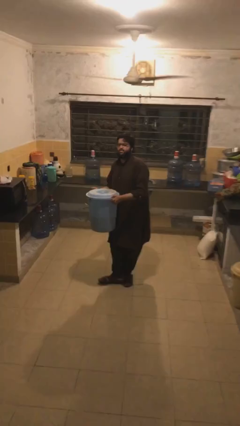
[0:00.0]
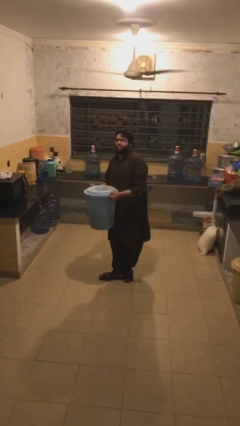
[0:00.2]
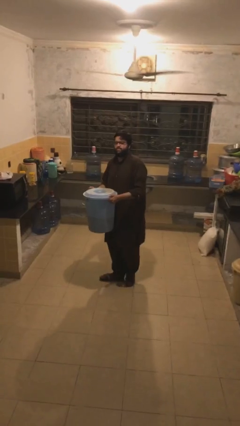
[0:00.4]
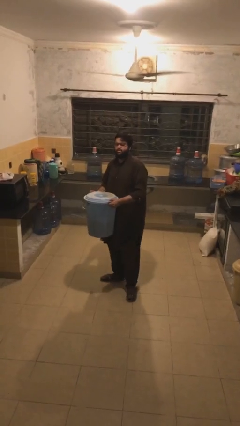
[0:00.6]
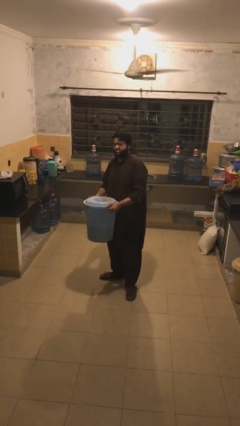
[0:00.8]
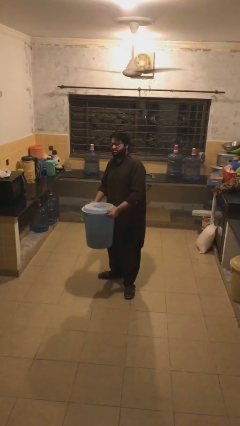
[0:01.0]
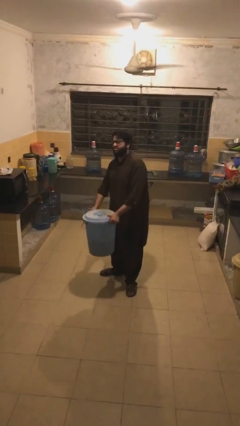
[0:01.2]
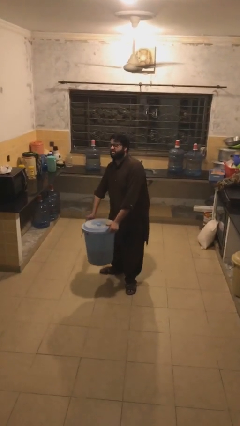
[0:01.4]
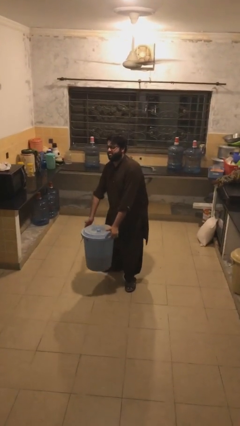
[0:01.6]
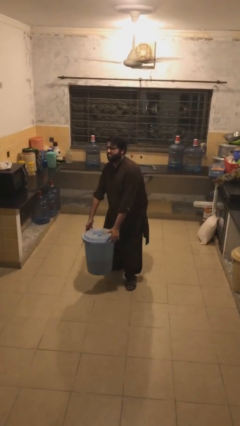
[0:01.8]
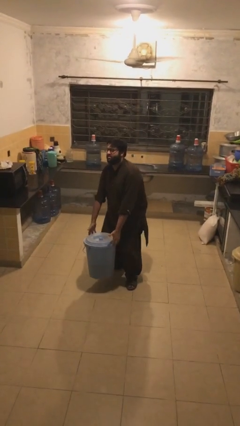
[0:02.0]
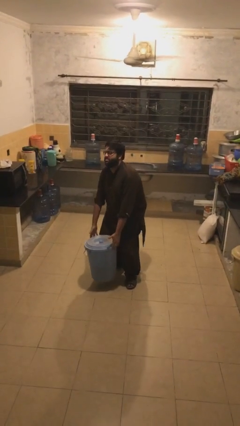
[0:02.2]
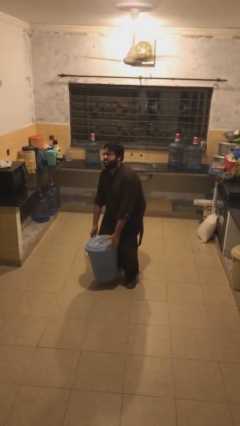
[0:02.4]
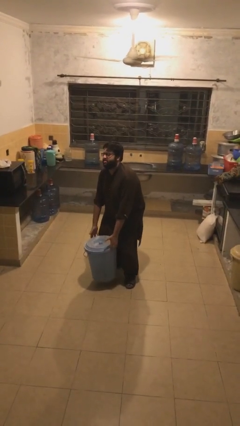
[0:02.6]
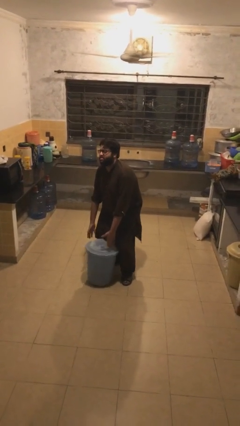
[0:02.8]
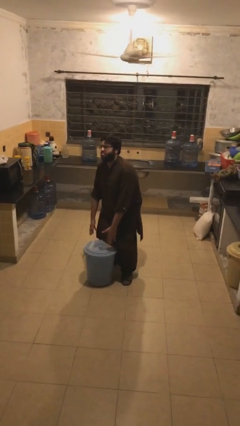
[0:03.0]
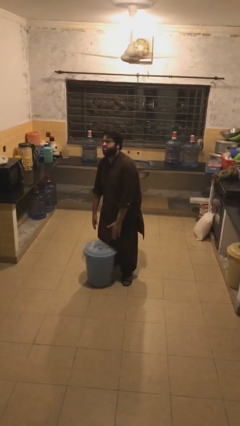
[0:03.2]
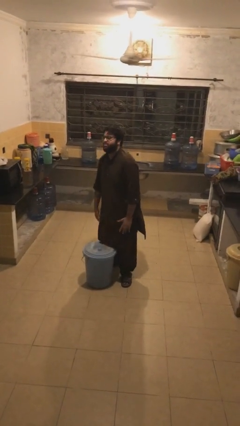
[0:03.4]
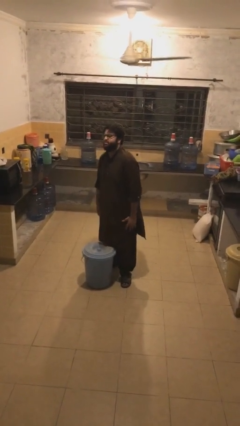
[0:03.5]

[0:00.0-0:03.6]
person puts down object on floor

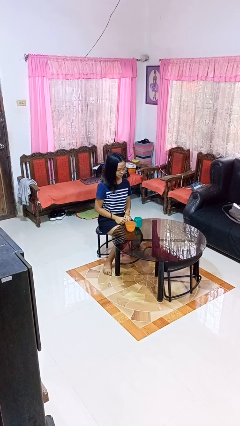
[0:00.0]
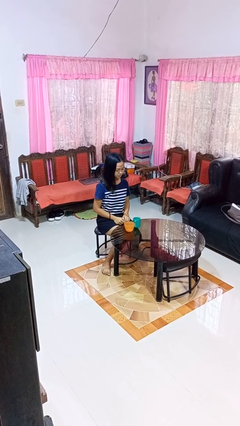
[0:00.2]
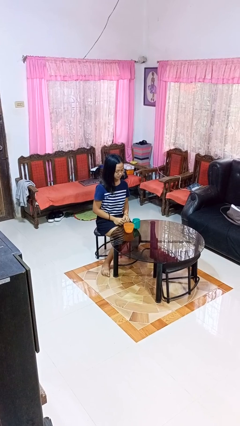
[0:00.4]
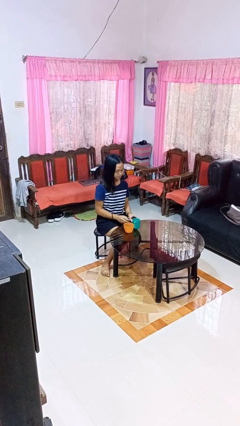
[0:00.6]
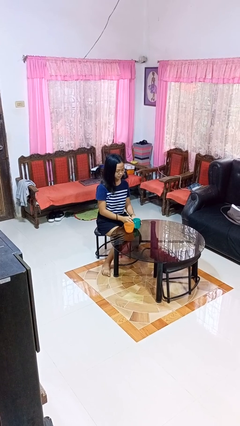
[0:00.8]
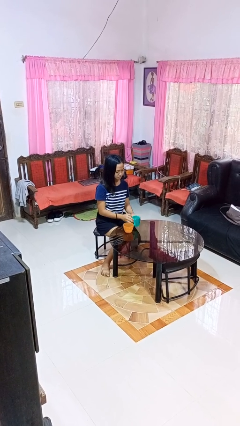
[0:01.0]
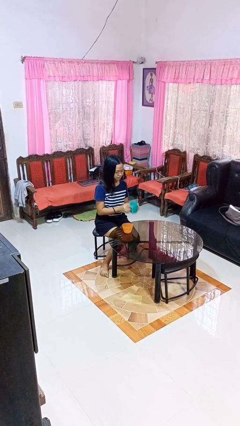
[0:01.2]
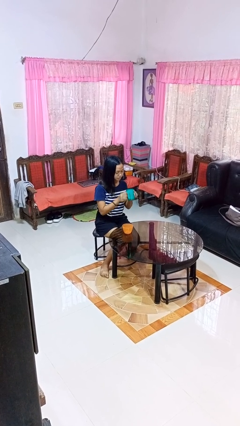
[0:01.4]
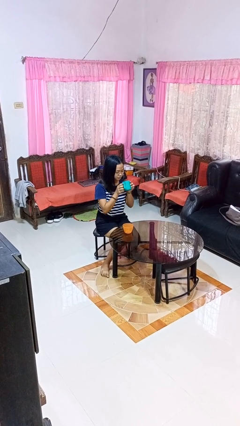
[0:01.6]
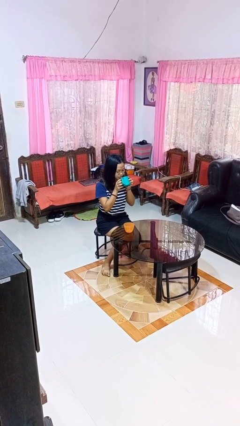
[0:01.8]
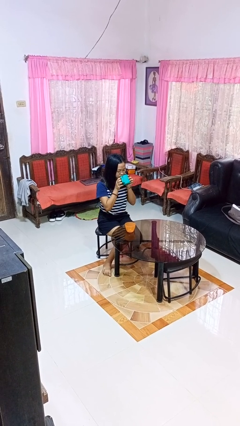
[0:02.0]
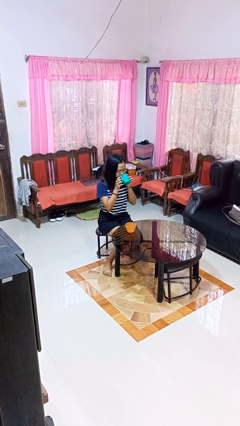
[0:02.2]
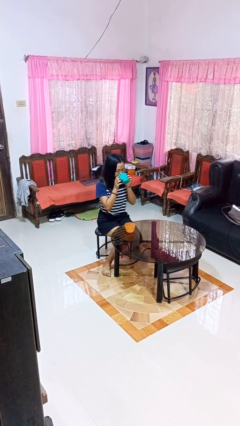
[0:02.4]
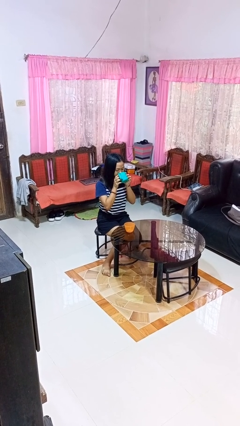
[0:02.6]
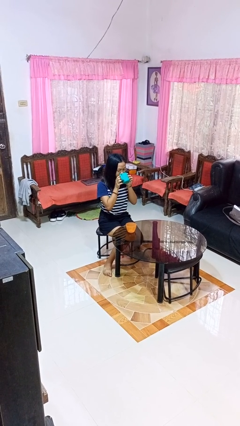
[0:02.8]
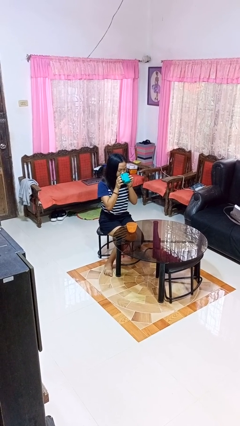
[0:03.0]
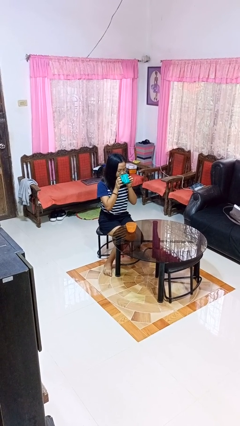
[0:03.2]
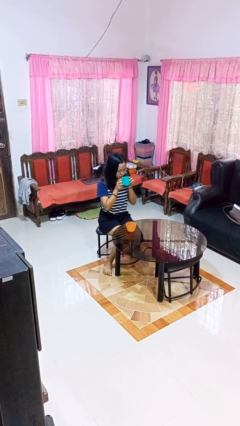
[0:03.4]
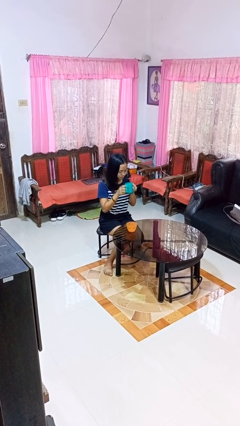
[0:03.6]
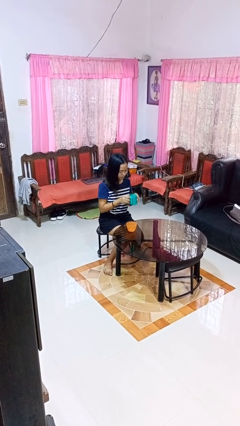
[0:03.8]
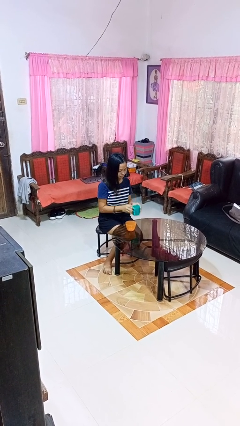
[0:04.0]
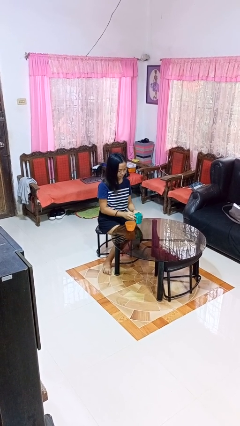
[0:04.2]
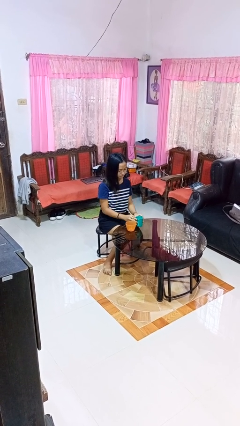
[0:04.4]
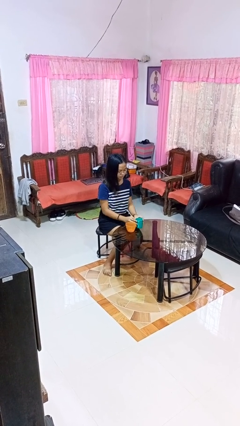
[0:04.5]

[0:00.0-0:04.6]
person drinks from cup

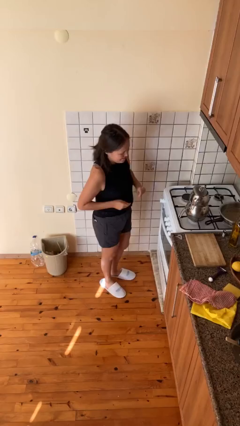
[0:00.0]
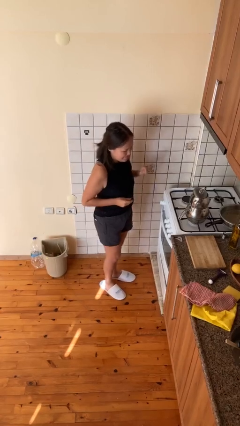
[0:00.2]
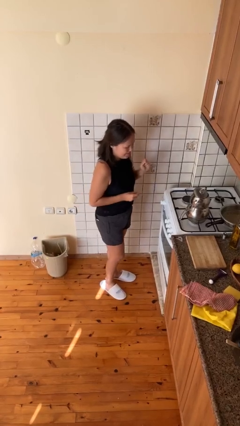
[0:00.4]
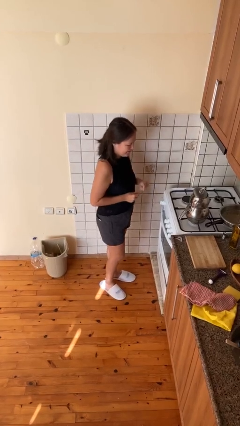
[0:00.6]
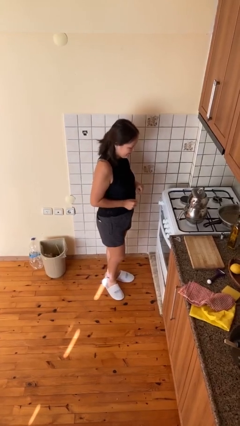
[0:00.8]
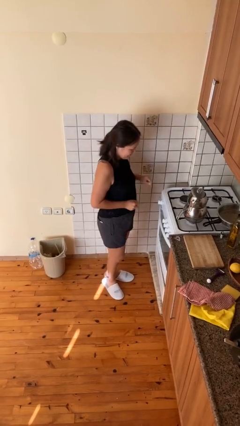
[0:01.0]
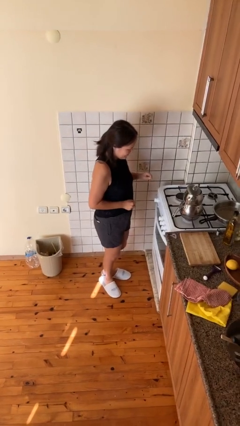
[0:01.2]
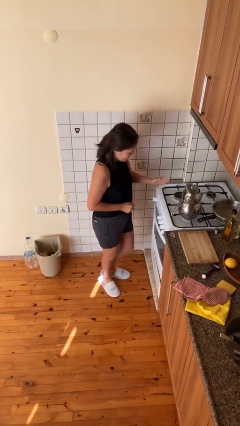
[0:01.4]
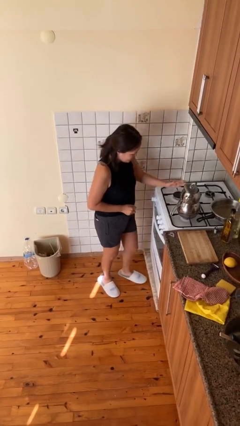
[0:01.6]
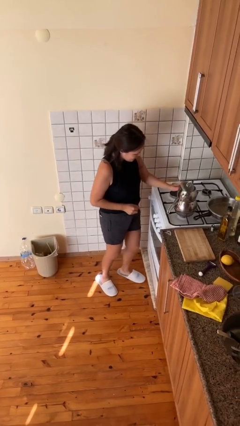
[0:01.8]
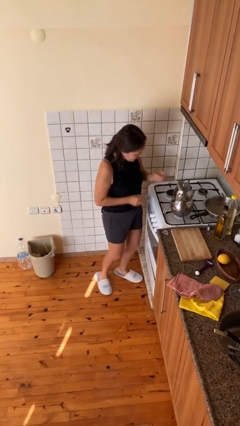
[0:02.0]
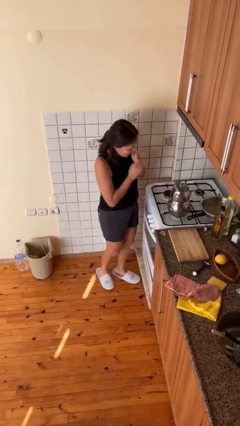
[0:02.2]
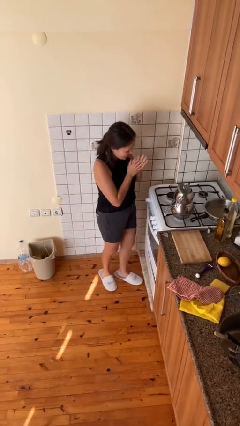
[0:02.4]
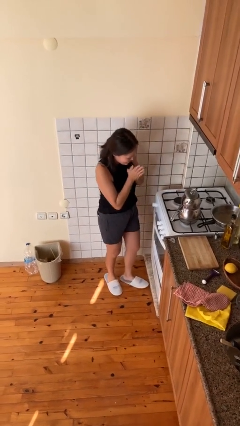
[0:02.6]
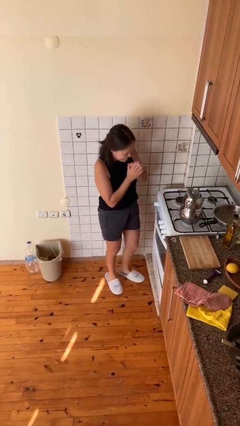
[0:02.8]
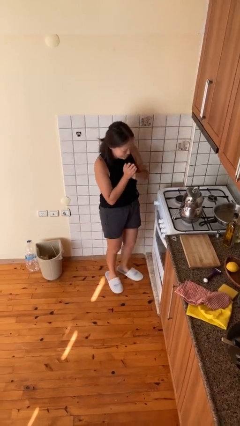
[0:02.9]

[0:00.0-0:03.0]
person burns hand

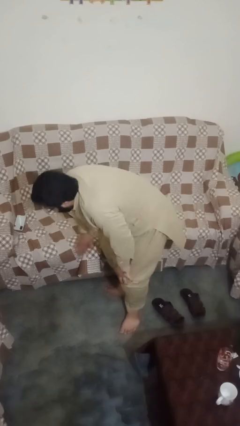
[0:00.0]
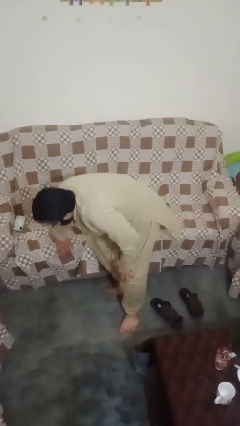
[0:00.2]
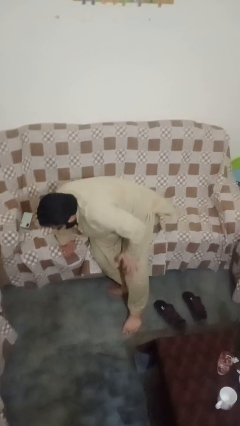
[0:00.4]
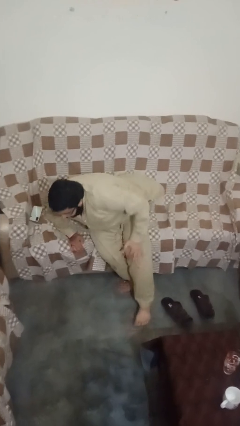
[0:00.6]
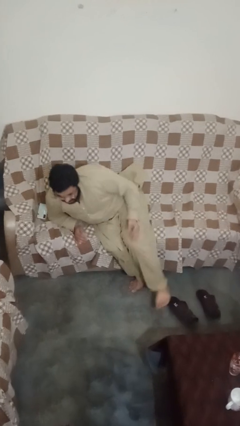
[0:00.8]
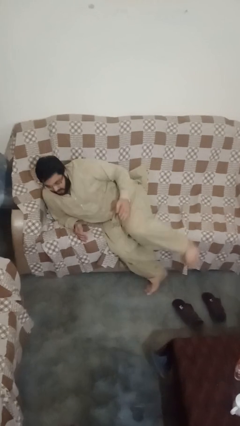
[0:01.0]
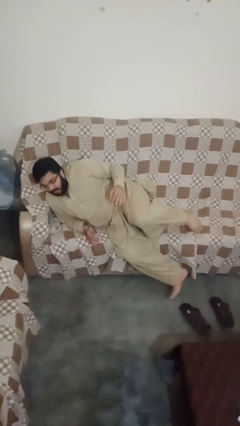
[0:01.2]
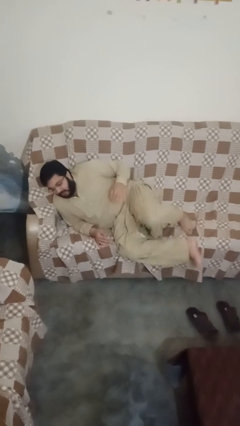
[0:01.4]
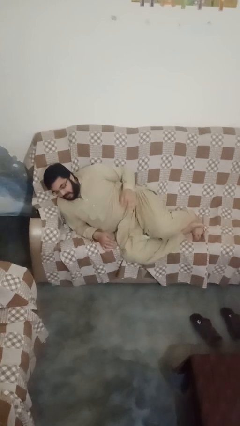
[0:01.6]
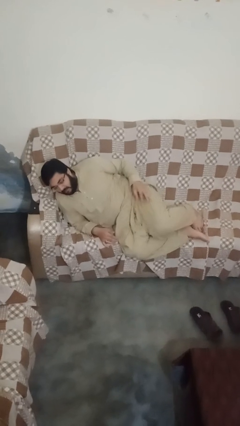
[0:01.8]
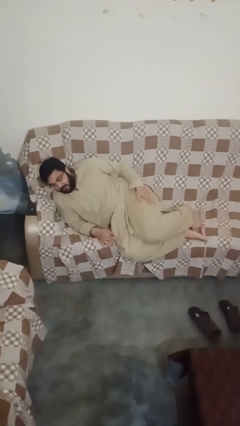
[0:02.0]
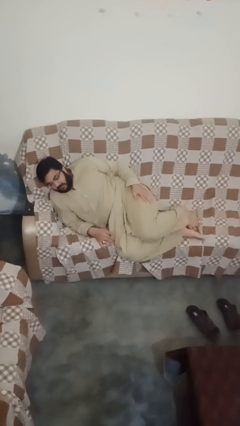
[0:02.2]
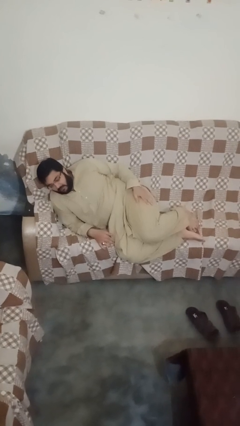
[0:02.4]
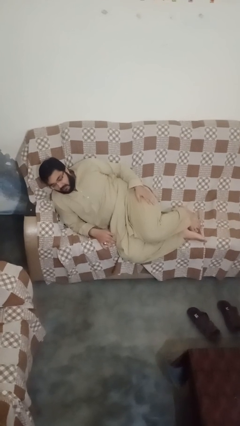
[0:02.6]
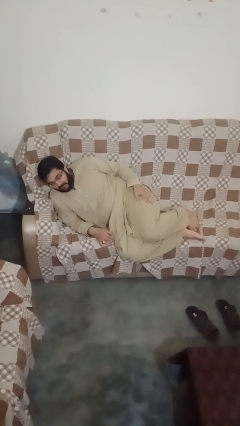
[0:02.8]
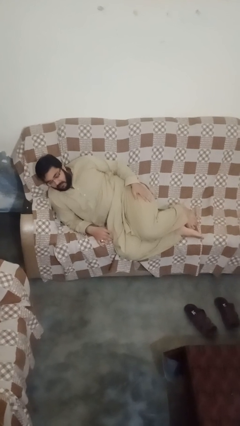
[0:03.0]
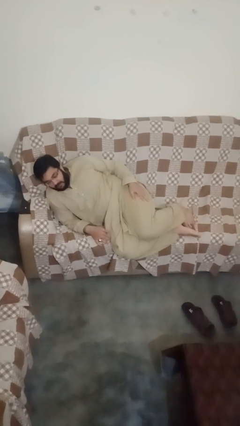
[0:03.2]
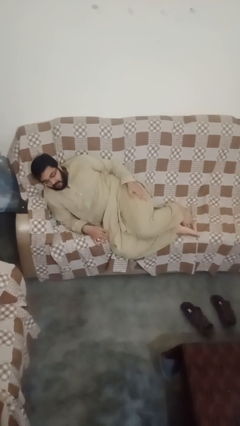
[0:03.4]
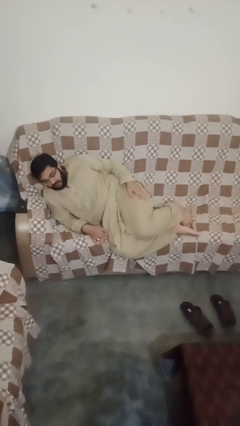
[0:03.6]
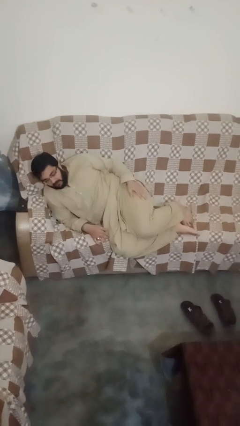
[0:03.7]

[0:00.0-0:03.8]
person lies down on bed

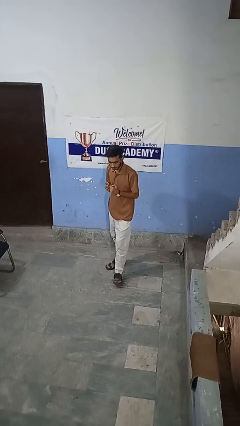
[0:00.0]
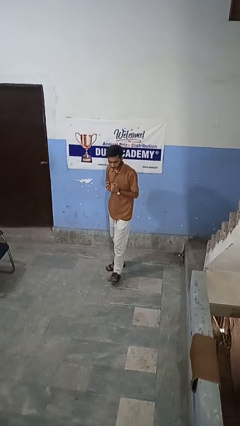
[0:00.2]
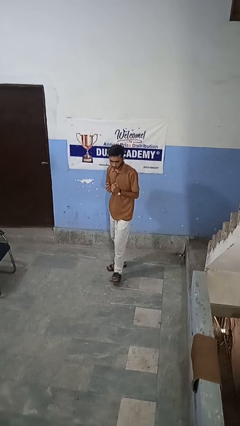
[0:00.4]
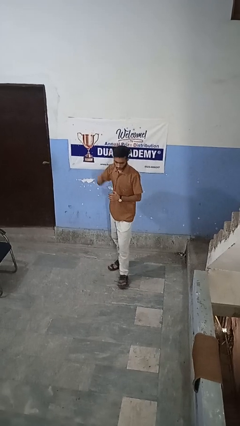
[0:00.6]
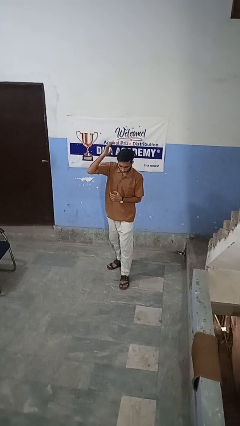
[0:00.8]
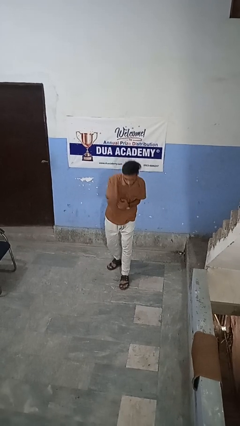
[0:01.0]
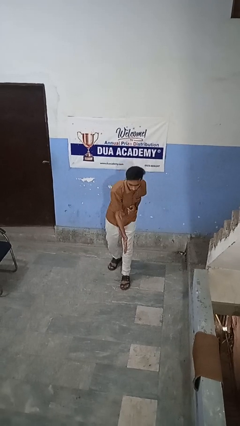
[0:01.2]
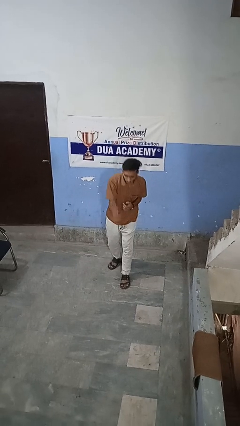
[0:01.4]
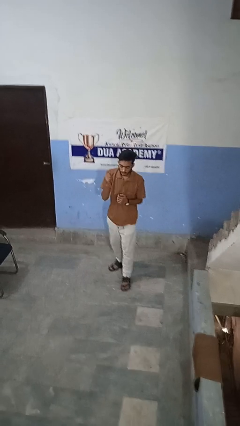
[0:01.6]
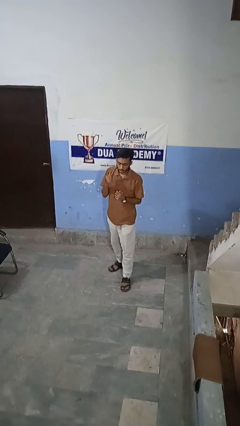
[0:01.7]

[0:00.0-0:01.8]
person karate chop

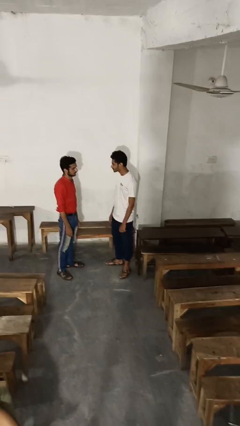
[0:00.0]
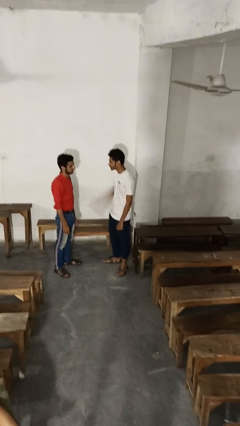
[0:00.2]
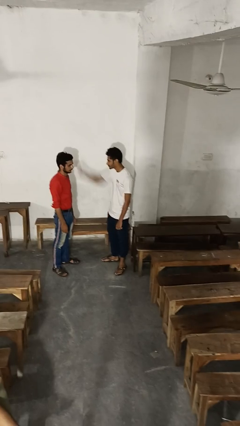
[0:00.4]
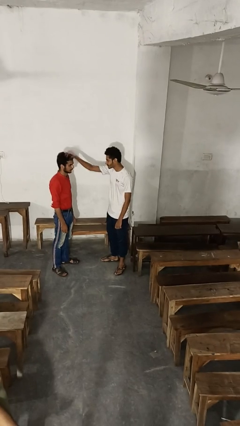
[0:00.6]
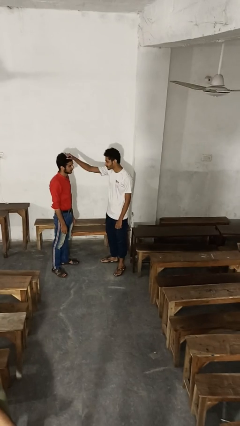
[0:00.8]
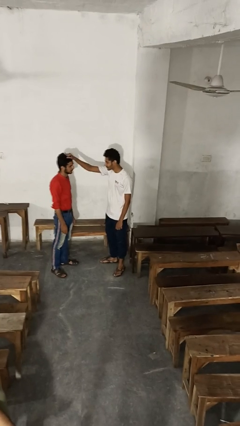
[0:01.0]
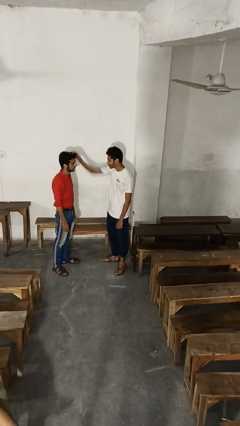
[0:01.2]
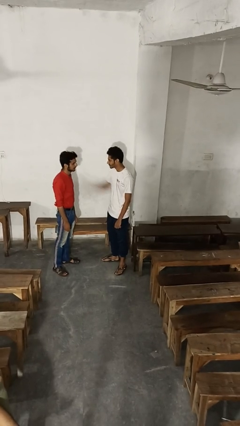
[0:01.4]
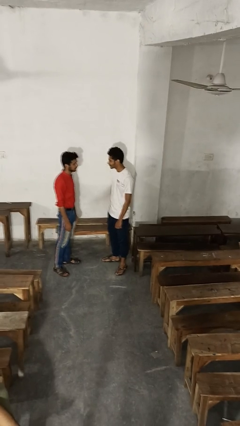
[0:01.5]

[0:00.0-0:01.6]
person grabs person by hair
